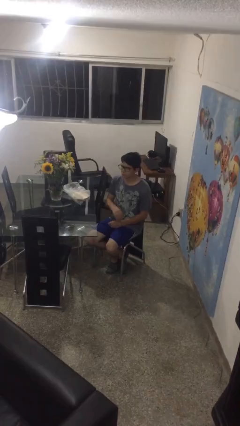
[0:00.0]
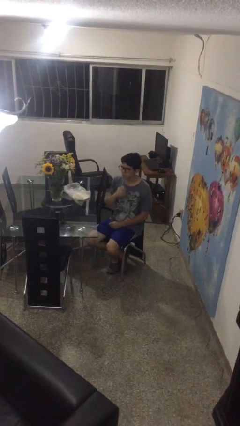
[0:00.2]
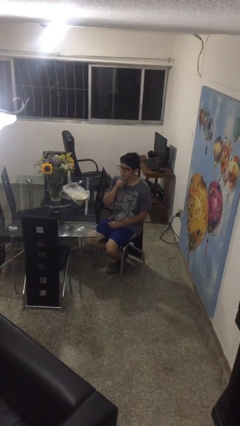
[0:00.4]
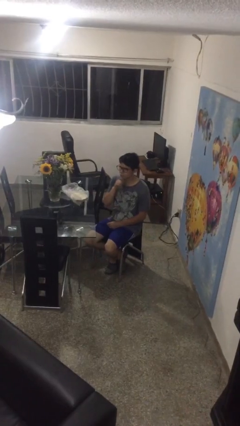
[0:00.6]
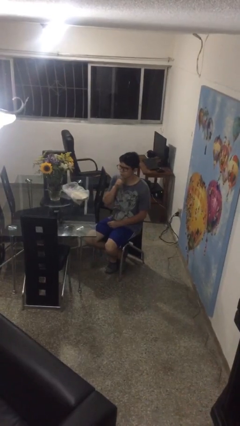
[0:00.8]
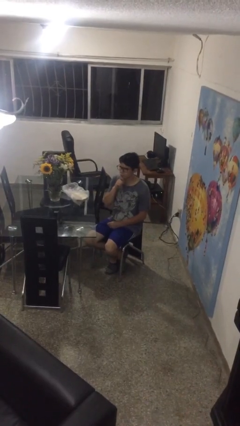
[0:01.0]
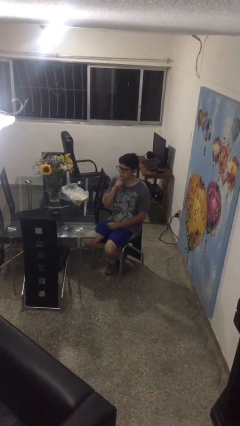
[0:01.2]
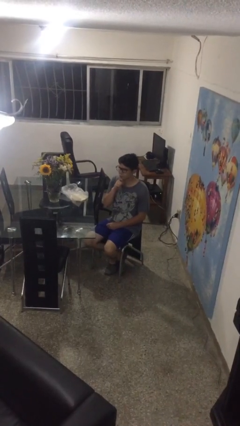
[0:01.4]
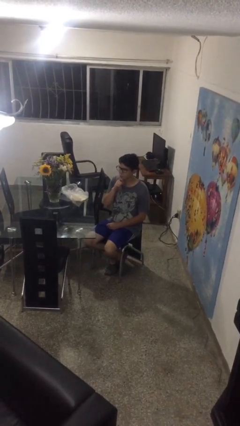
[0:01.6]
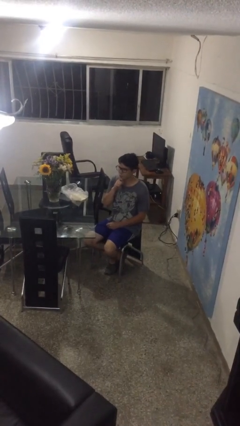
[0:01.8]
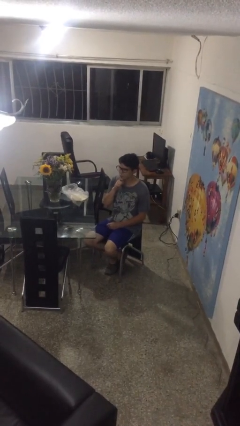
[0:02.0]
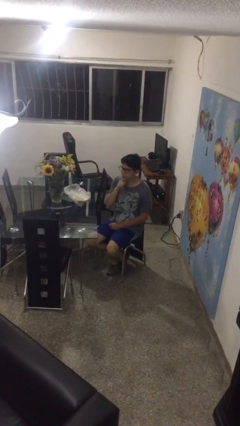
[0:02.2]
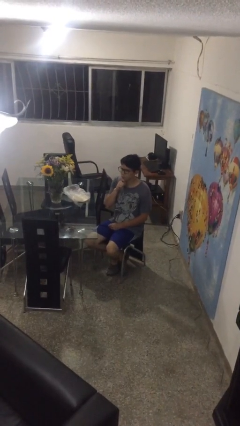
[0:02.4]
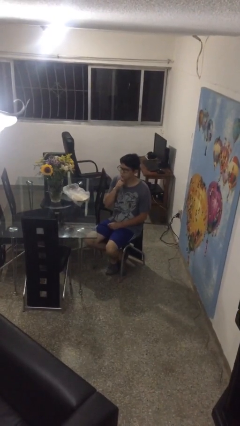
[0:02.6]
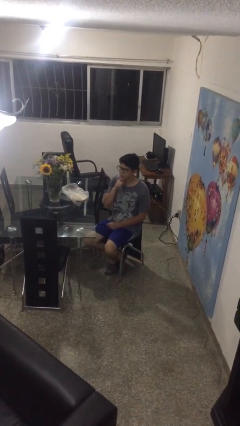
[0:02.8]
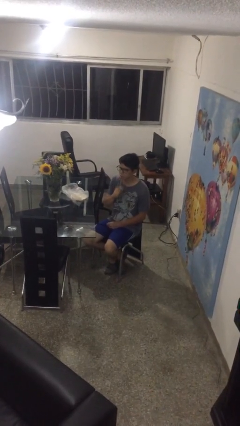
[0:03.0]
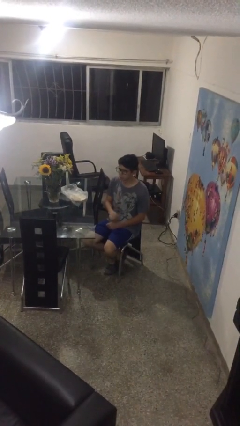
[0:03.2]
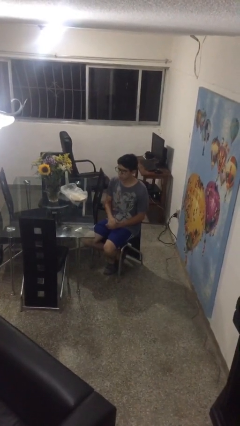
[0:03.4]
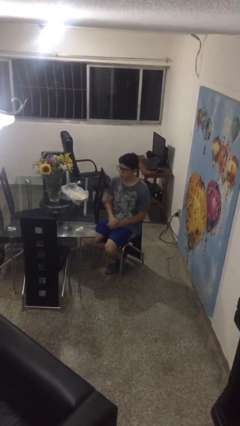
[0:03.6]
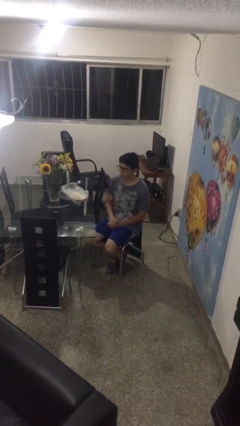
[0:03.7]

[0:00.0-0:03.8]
person strokes chin

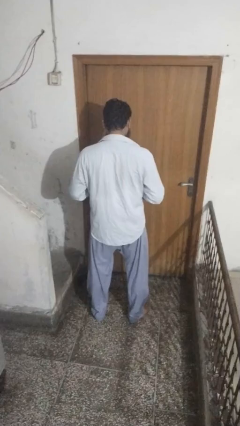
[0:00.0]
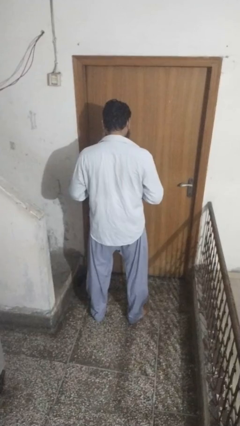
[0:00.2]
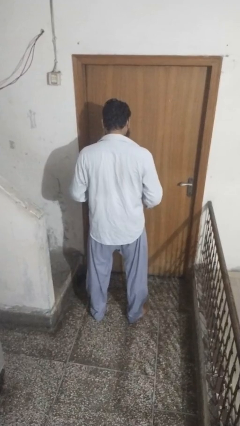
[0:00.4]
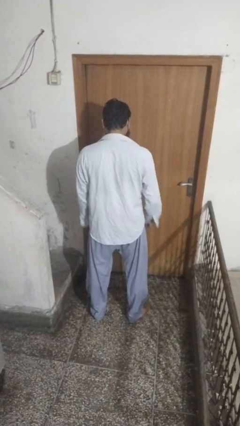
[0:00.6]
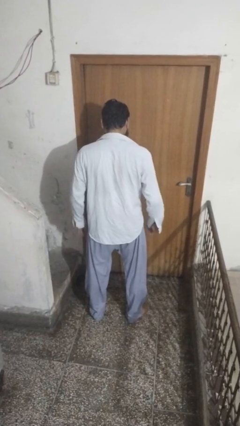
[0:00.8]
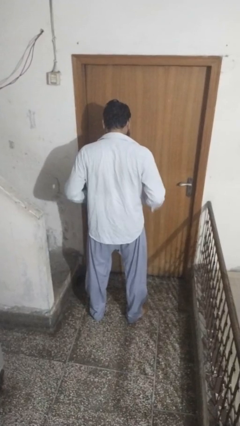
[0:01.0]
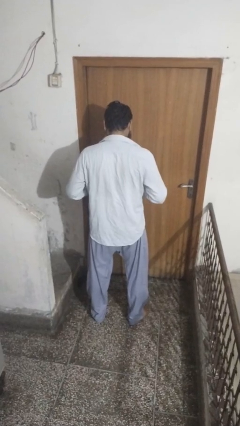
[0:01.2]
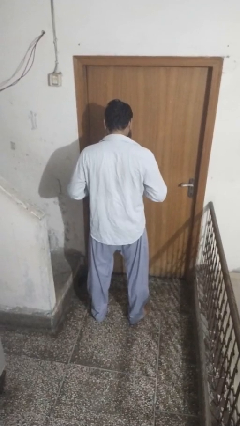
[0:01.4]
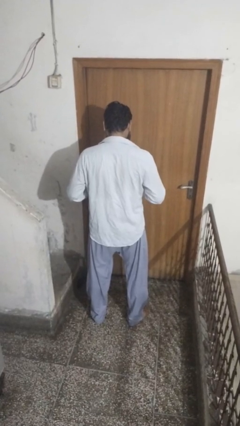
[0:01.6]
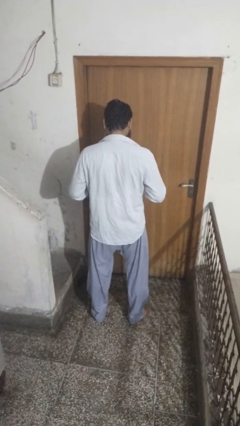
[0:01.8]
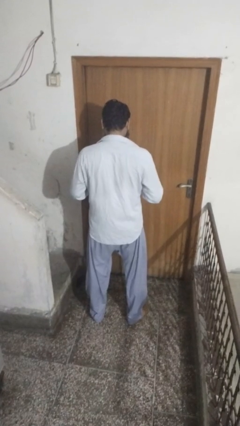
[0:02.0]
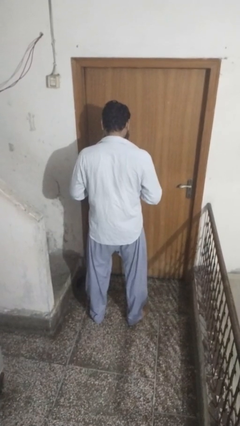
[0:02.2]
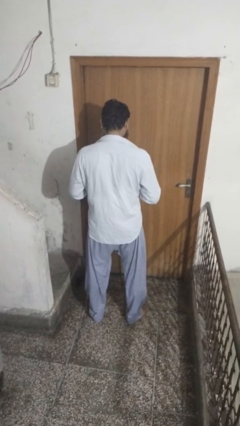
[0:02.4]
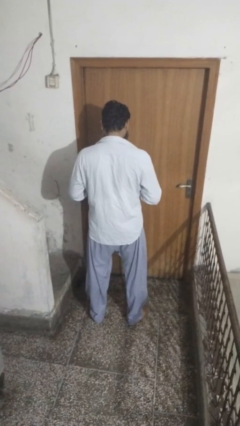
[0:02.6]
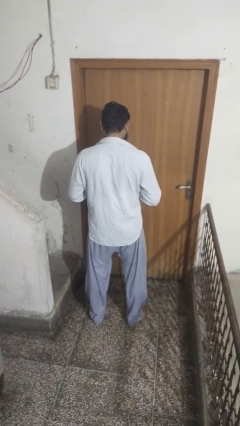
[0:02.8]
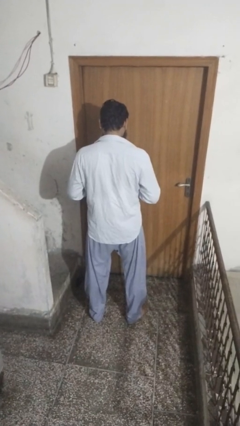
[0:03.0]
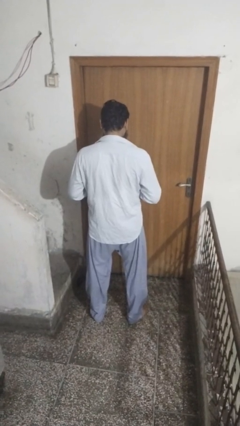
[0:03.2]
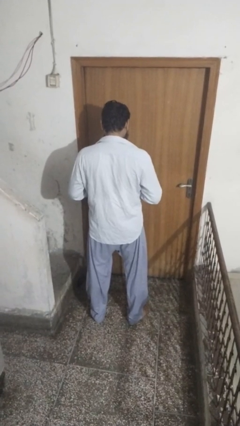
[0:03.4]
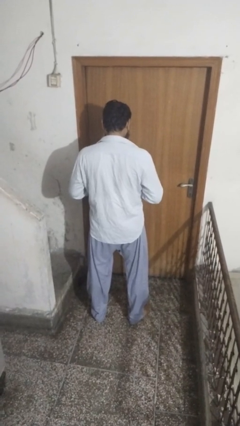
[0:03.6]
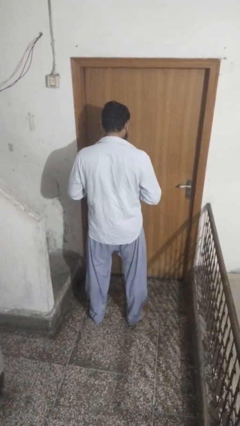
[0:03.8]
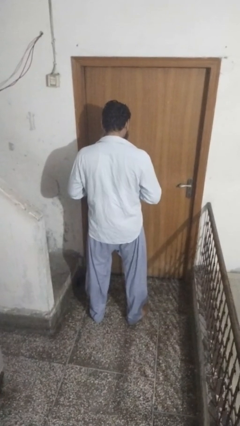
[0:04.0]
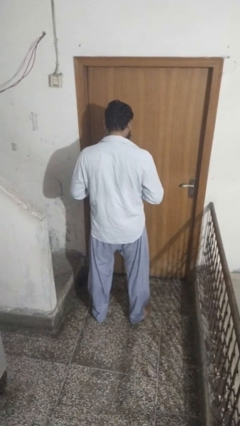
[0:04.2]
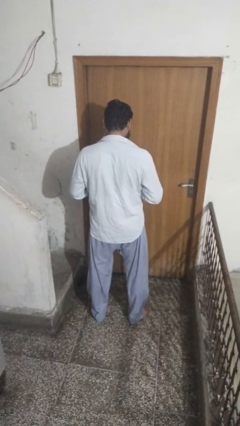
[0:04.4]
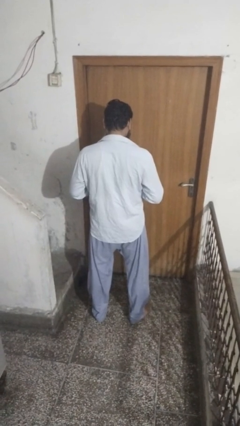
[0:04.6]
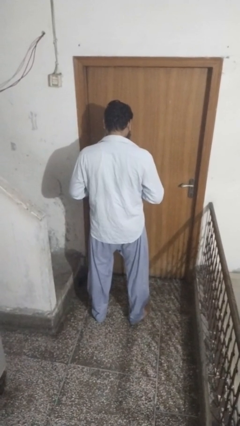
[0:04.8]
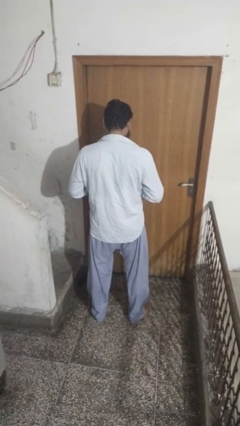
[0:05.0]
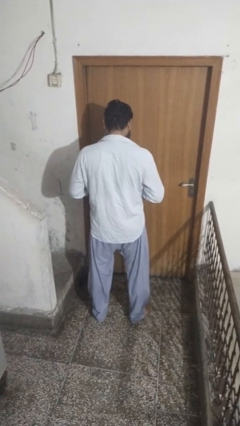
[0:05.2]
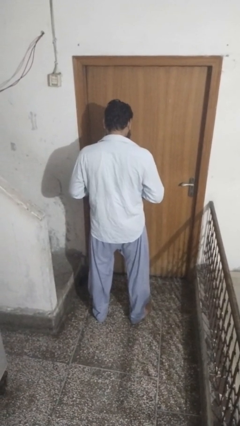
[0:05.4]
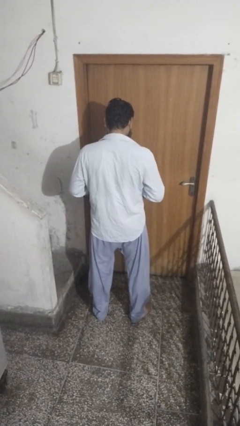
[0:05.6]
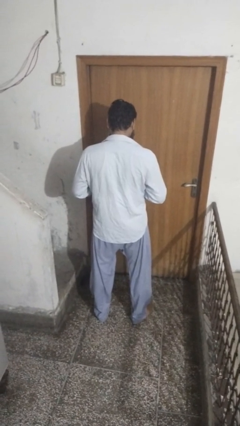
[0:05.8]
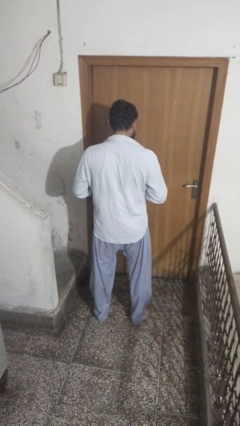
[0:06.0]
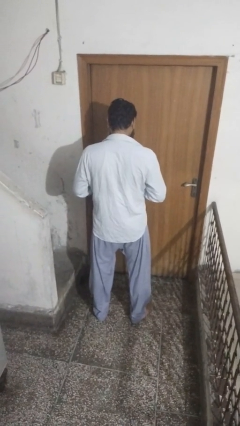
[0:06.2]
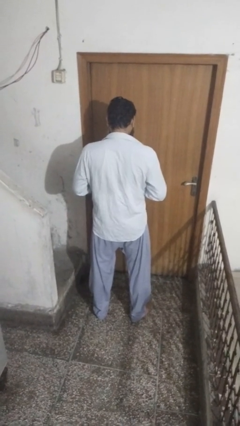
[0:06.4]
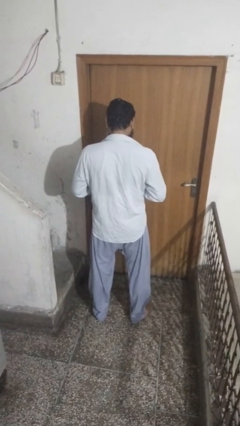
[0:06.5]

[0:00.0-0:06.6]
person buttons shirt

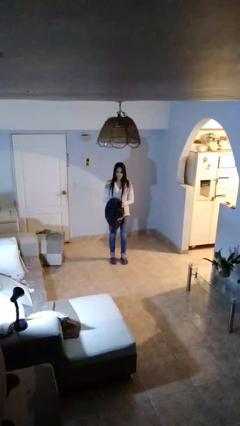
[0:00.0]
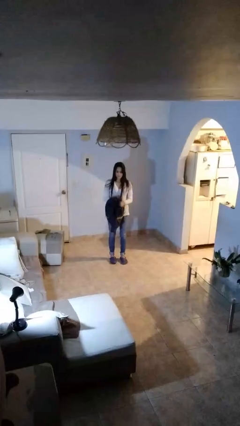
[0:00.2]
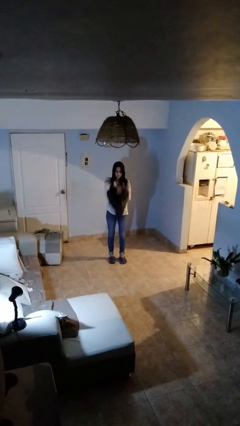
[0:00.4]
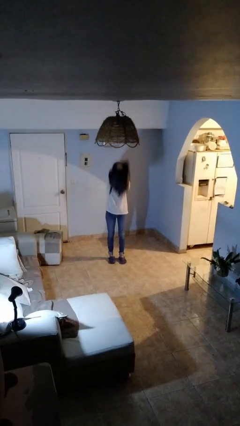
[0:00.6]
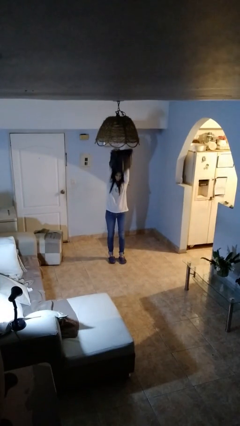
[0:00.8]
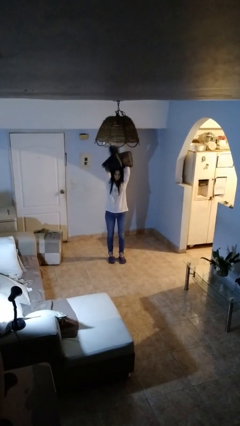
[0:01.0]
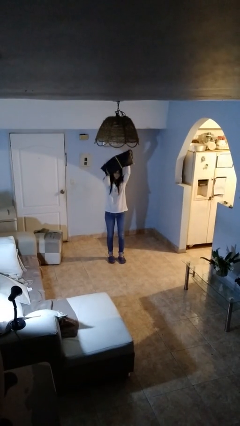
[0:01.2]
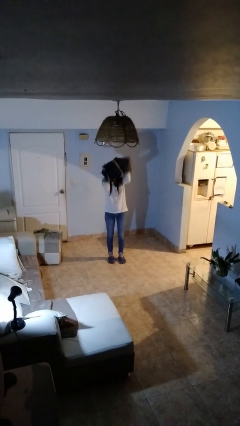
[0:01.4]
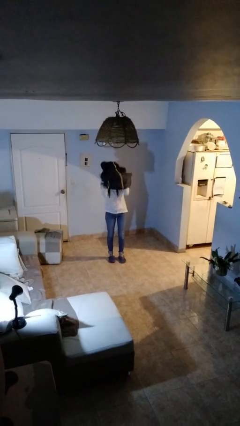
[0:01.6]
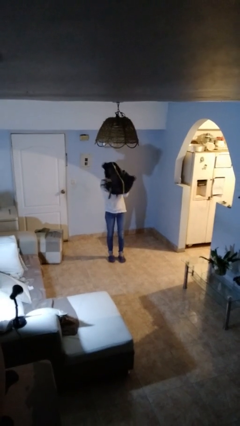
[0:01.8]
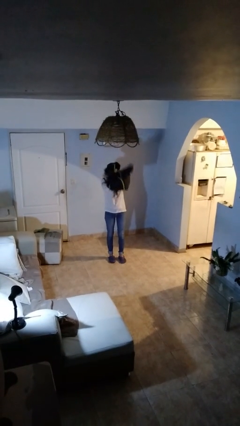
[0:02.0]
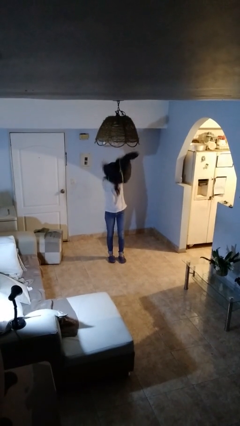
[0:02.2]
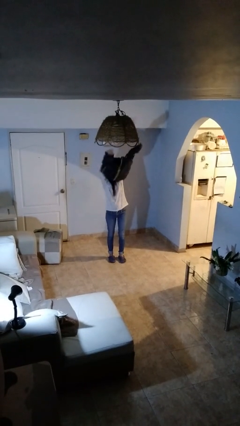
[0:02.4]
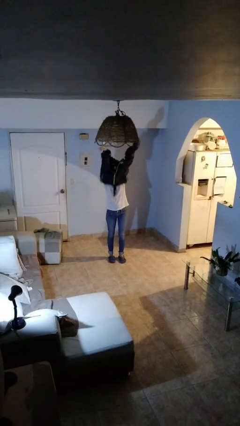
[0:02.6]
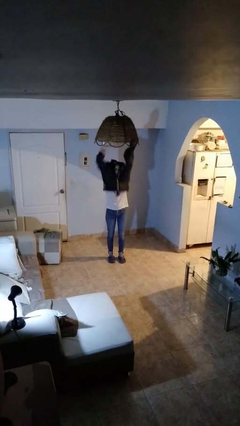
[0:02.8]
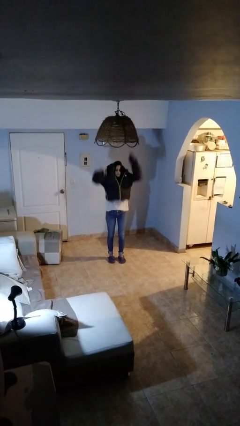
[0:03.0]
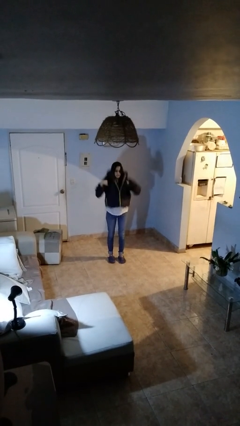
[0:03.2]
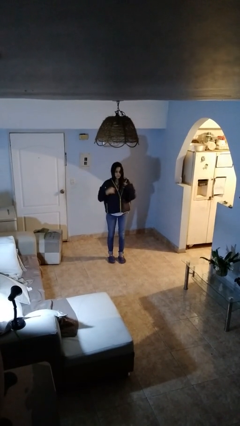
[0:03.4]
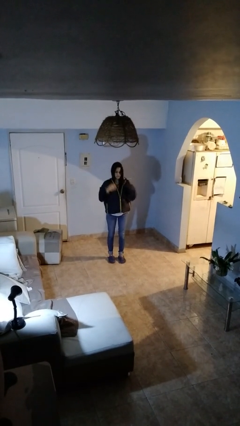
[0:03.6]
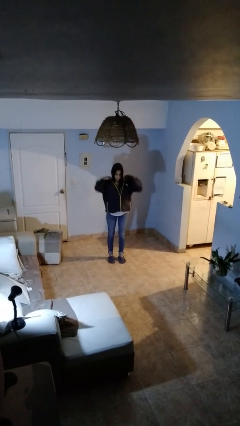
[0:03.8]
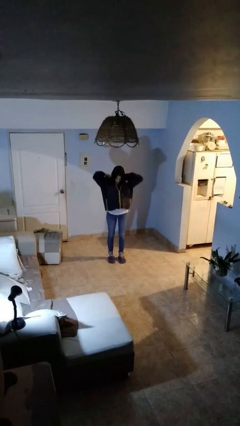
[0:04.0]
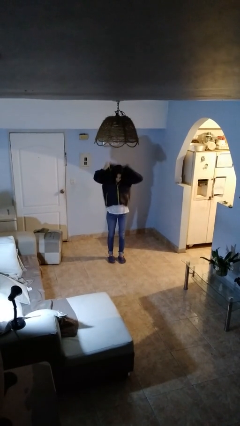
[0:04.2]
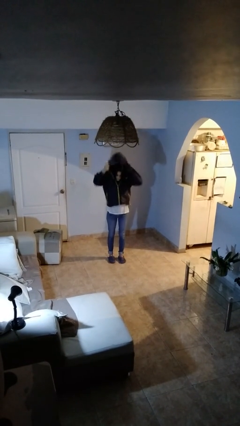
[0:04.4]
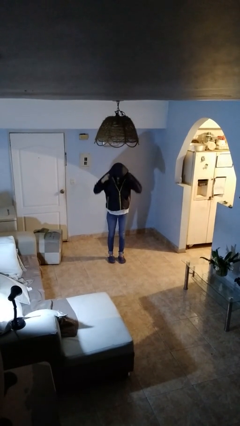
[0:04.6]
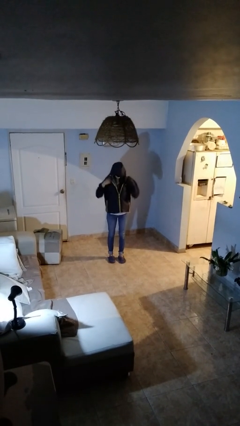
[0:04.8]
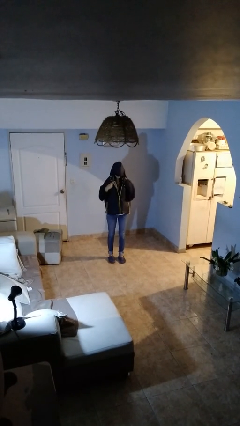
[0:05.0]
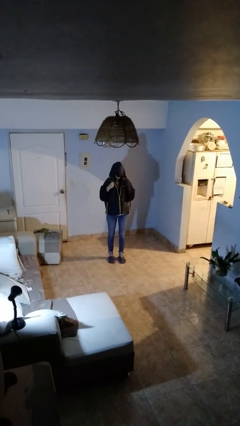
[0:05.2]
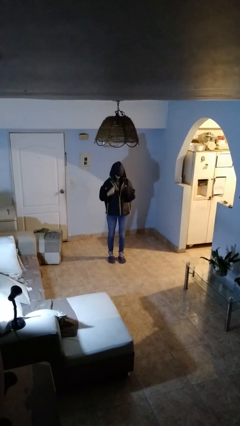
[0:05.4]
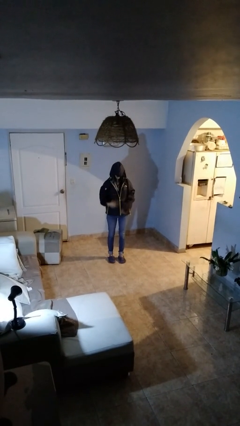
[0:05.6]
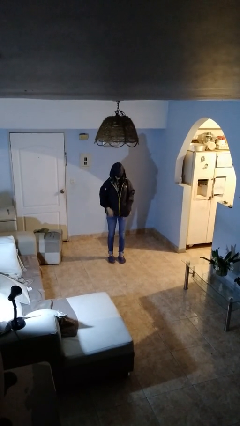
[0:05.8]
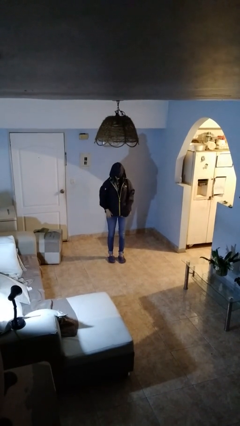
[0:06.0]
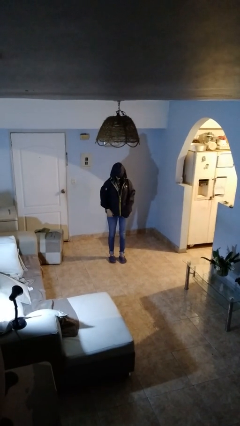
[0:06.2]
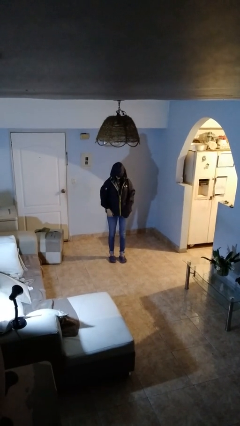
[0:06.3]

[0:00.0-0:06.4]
person puts on hoodie

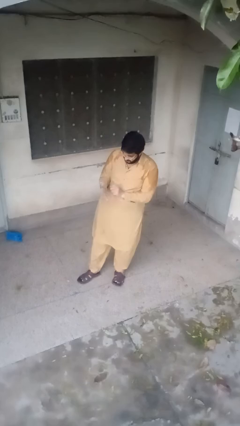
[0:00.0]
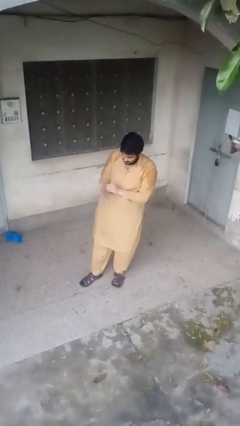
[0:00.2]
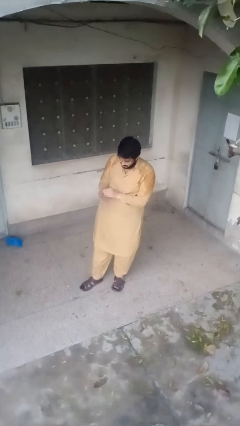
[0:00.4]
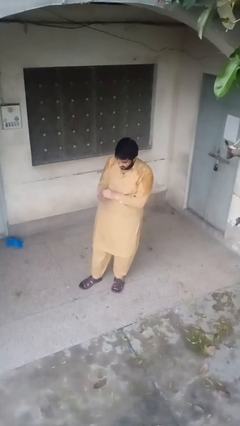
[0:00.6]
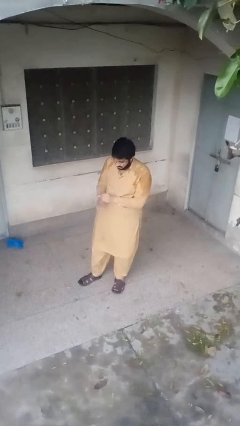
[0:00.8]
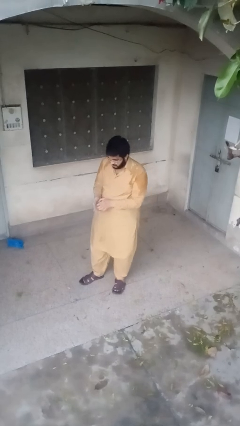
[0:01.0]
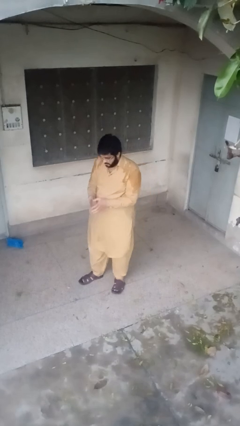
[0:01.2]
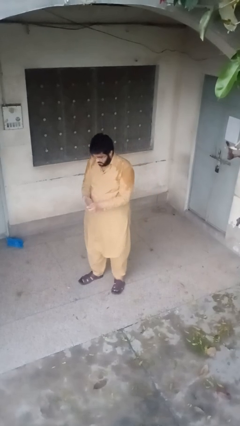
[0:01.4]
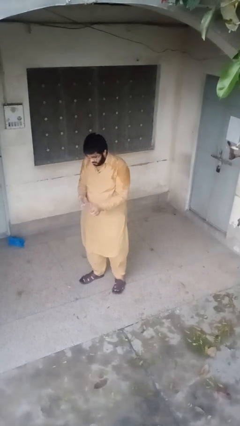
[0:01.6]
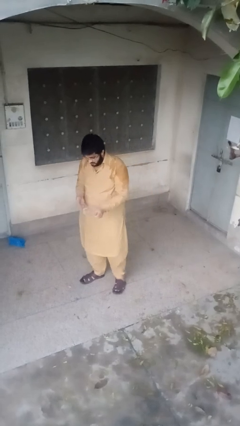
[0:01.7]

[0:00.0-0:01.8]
person takes off gloves
